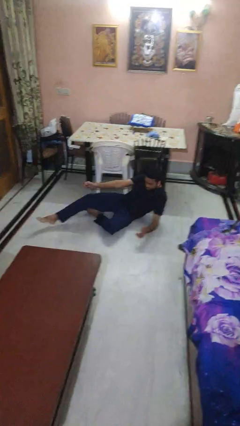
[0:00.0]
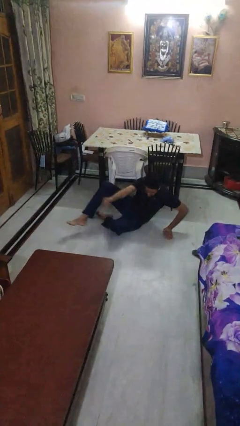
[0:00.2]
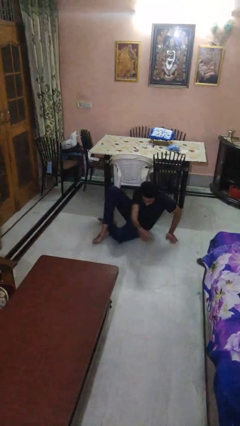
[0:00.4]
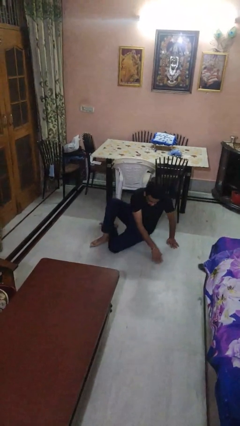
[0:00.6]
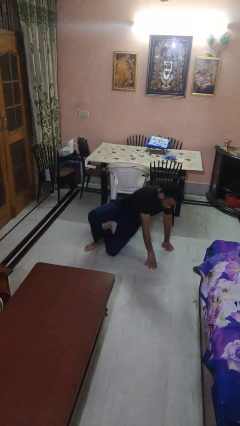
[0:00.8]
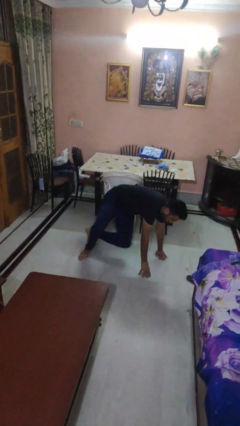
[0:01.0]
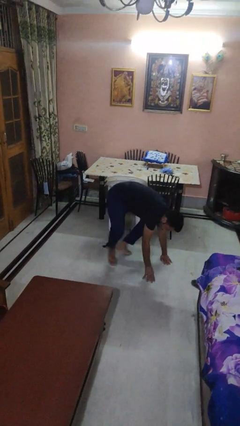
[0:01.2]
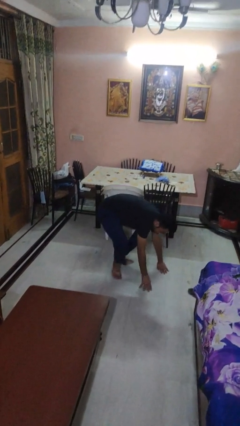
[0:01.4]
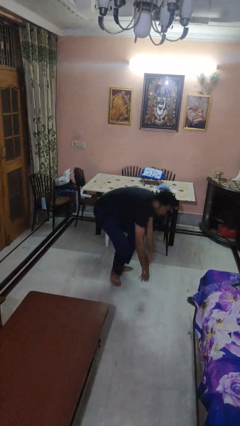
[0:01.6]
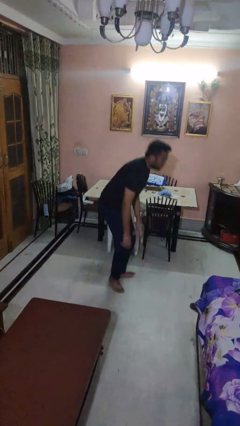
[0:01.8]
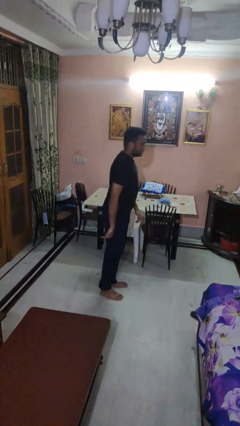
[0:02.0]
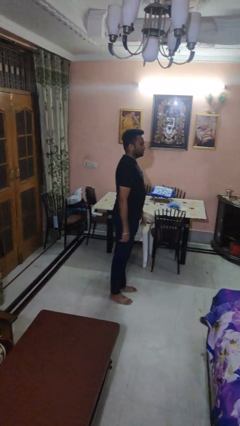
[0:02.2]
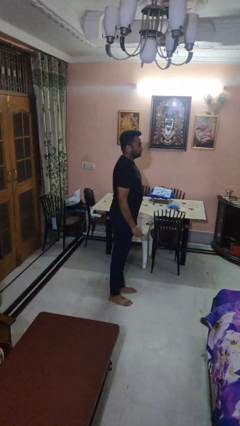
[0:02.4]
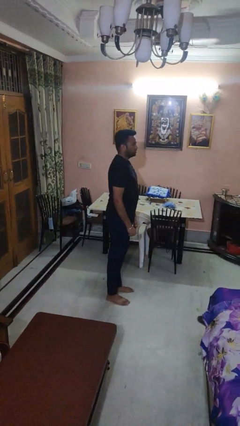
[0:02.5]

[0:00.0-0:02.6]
person stands up from floor

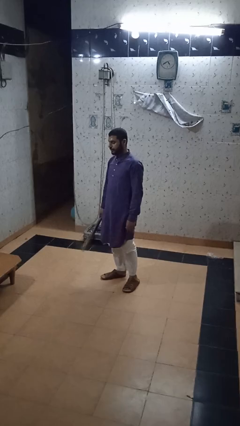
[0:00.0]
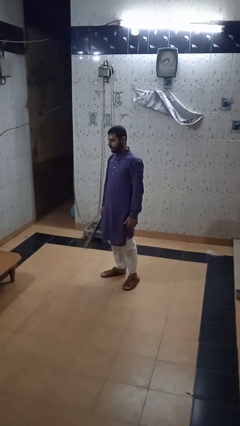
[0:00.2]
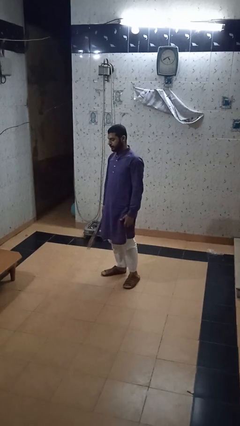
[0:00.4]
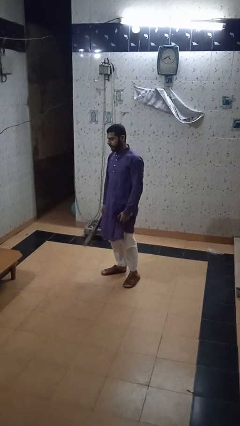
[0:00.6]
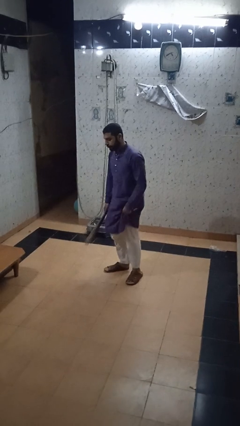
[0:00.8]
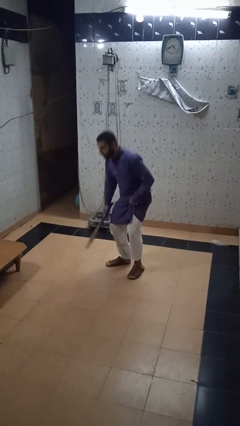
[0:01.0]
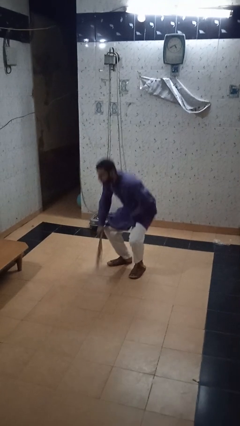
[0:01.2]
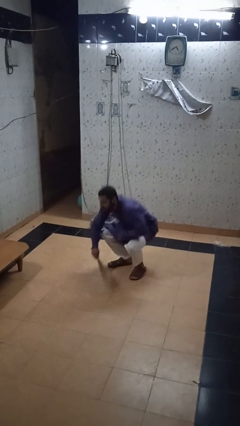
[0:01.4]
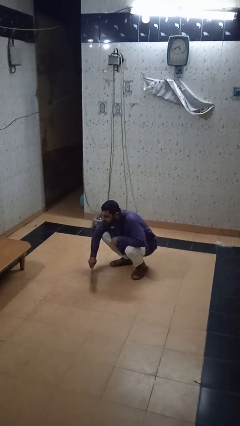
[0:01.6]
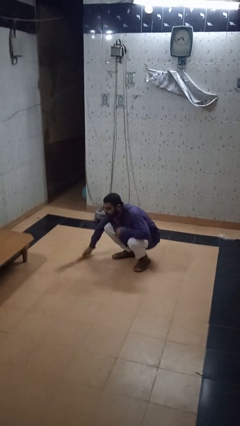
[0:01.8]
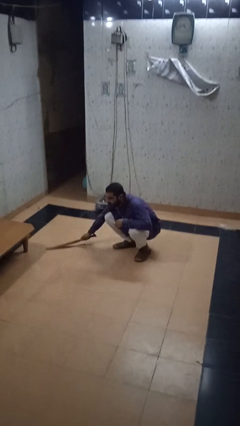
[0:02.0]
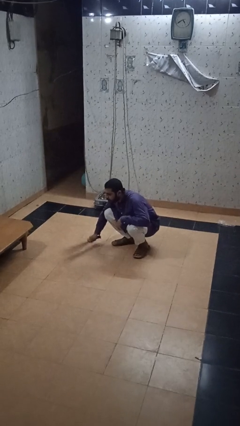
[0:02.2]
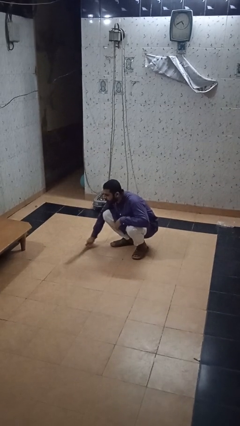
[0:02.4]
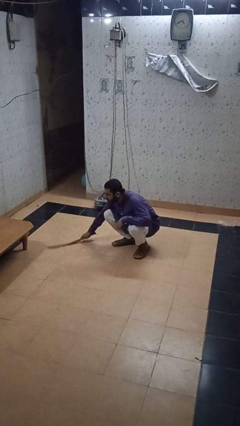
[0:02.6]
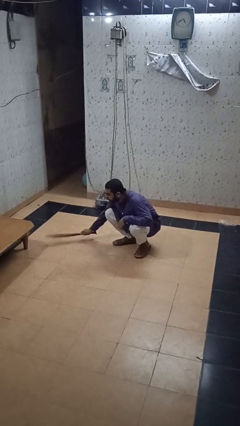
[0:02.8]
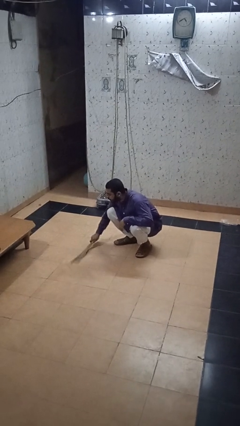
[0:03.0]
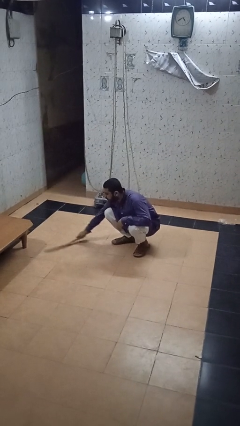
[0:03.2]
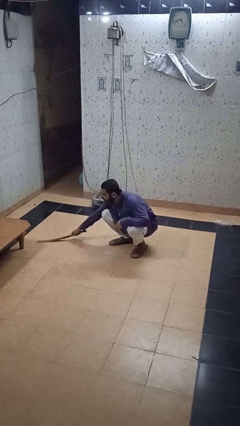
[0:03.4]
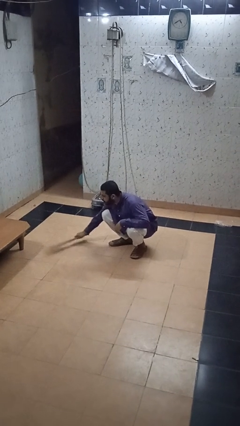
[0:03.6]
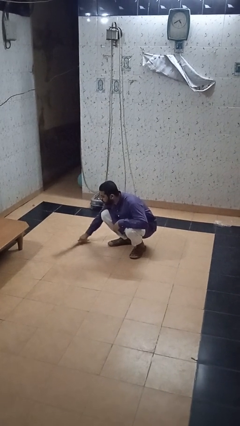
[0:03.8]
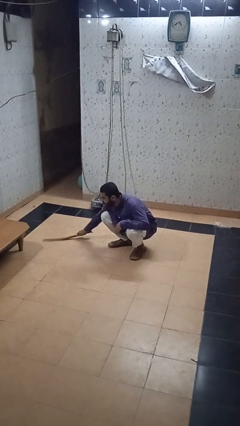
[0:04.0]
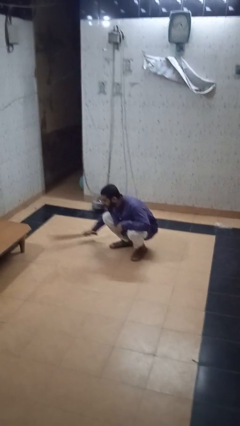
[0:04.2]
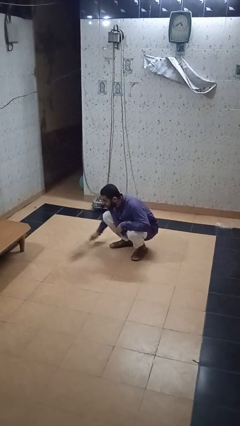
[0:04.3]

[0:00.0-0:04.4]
person sweeps floor

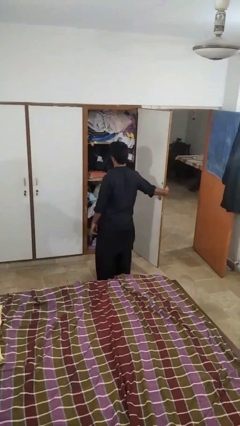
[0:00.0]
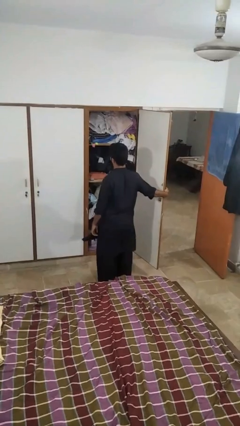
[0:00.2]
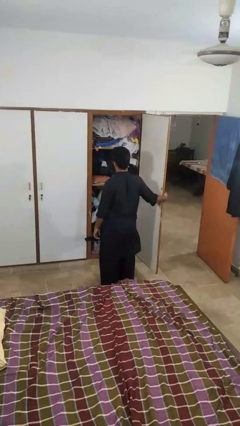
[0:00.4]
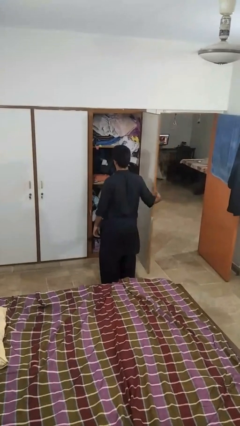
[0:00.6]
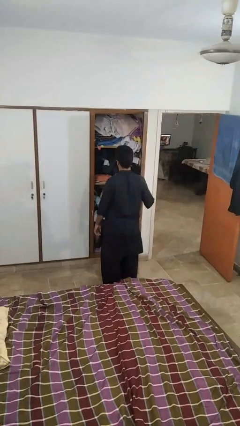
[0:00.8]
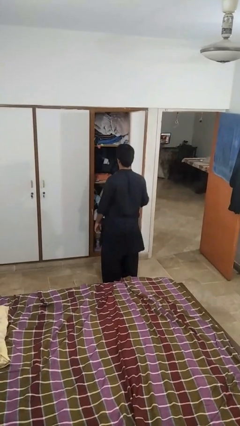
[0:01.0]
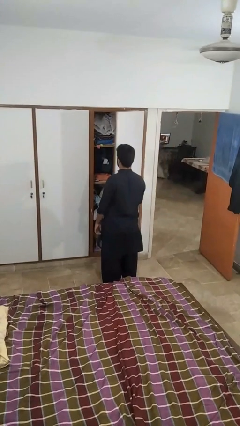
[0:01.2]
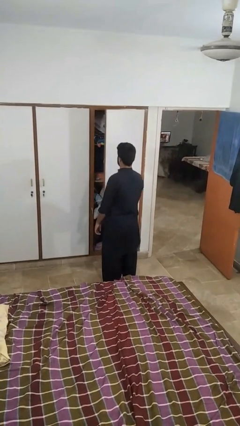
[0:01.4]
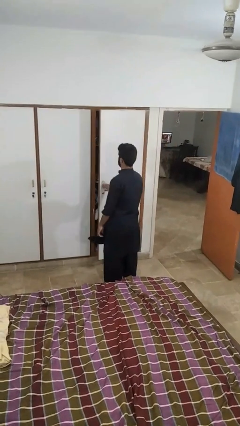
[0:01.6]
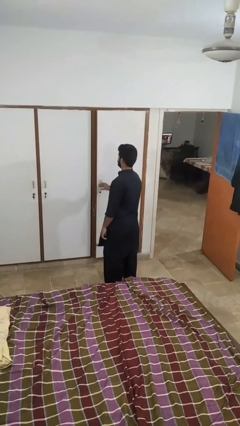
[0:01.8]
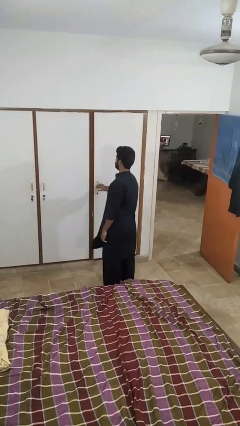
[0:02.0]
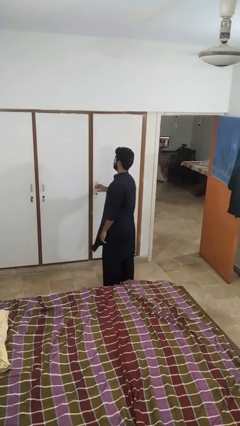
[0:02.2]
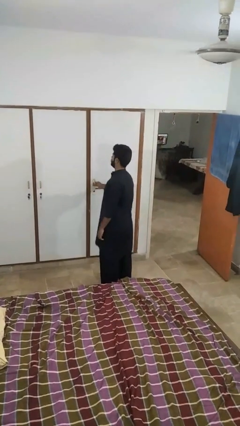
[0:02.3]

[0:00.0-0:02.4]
person closes closet door

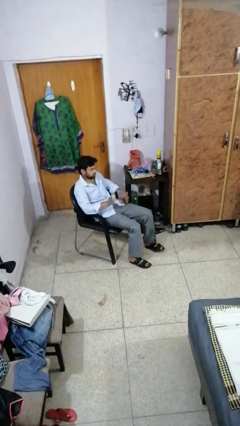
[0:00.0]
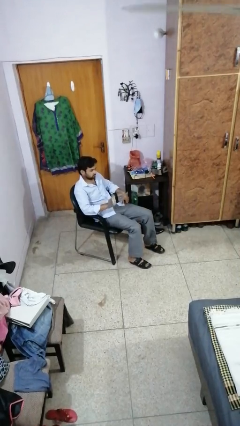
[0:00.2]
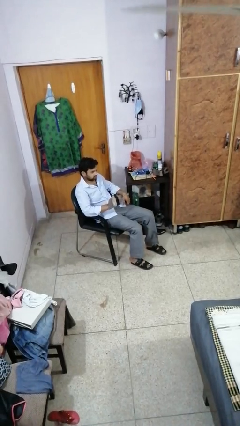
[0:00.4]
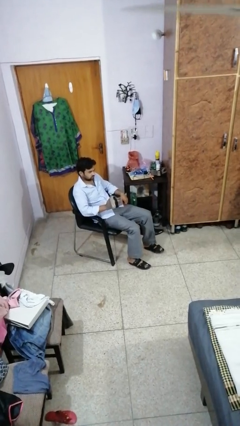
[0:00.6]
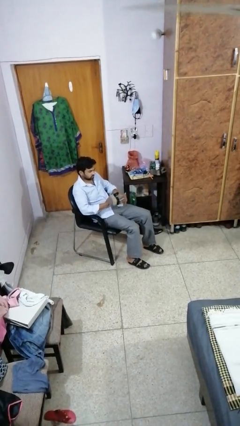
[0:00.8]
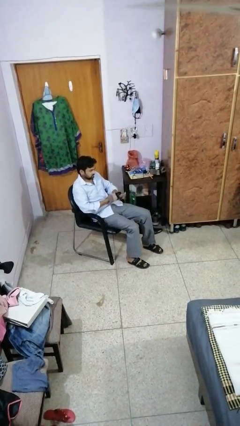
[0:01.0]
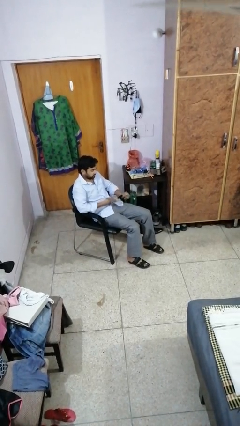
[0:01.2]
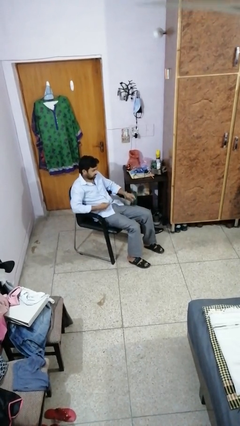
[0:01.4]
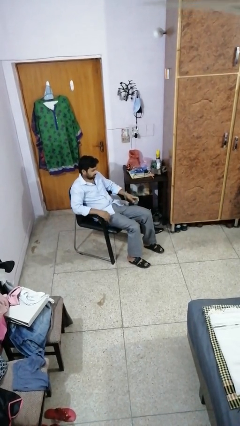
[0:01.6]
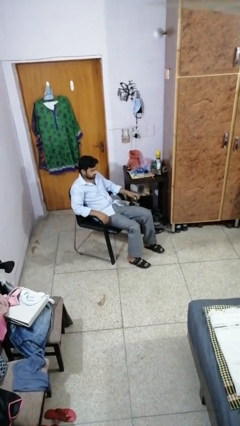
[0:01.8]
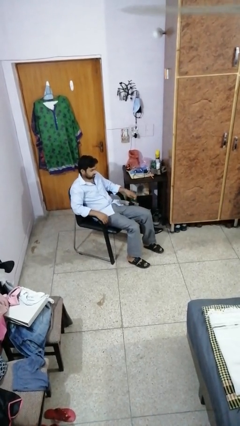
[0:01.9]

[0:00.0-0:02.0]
person takes off gloves

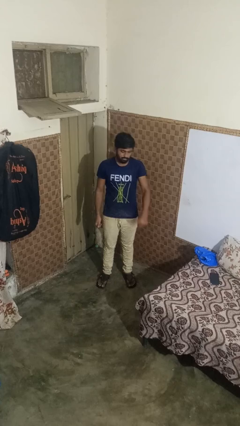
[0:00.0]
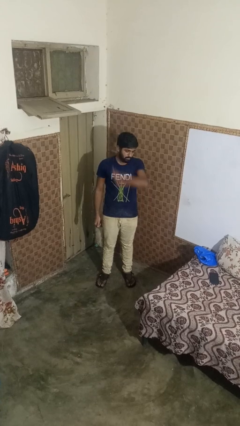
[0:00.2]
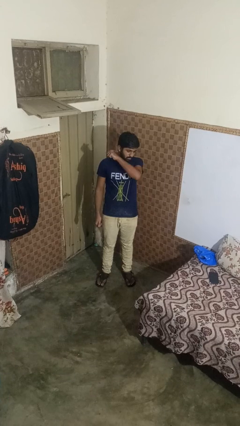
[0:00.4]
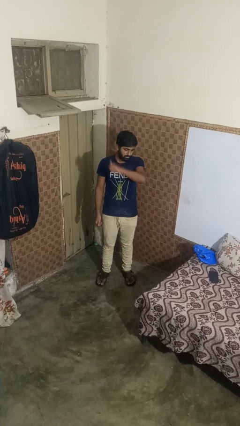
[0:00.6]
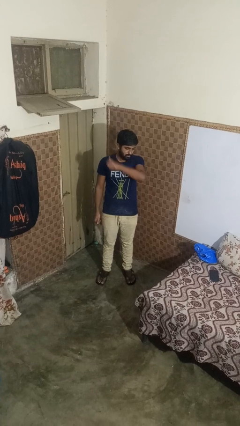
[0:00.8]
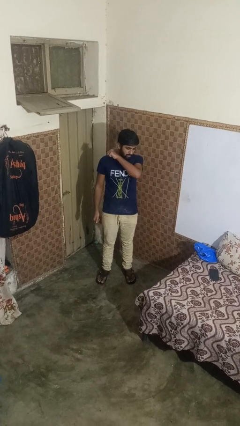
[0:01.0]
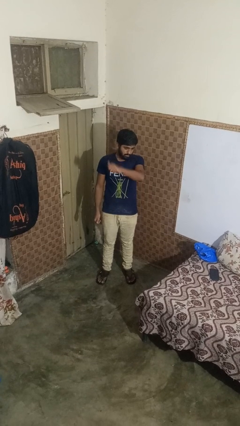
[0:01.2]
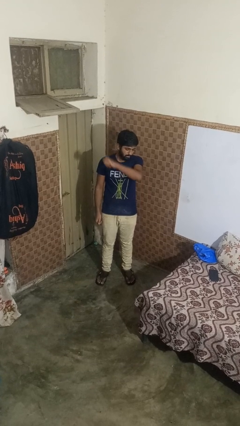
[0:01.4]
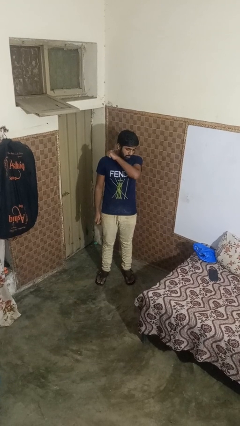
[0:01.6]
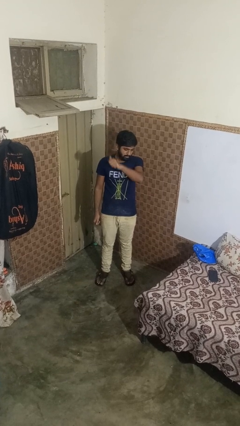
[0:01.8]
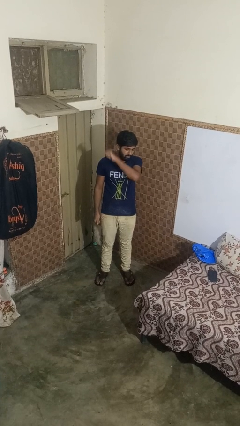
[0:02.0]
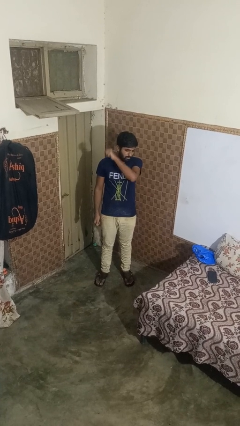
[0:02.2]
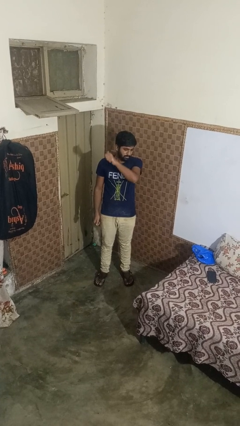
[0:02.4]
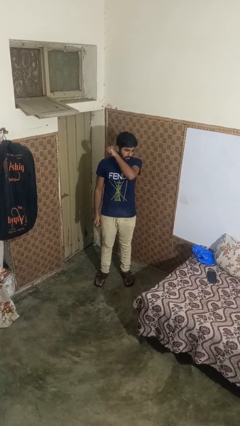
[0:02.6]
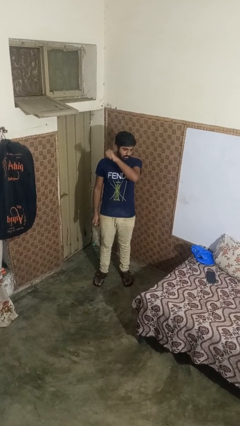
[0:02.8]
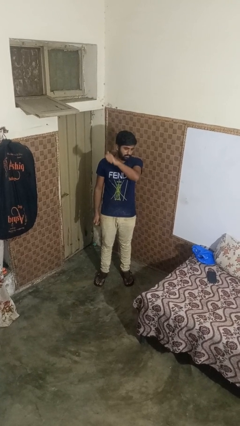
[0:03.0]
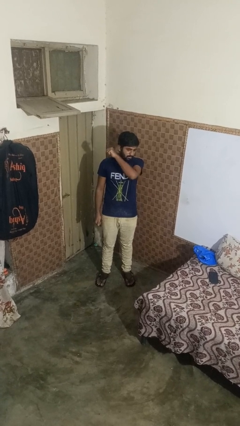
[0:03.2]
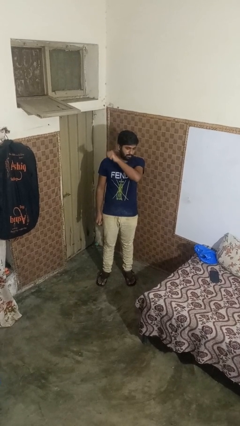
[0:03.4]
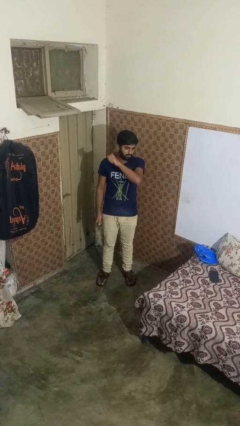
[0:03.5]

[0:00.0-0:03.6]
person gestures behind me

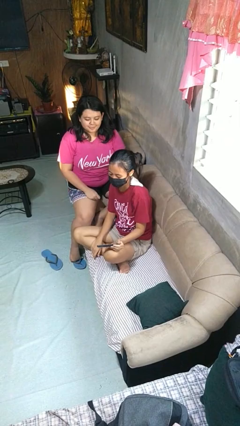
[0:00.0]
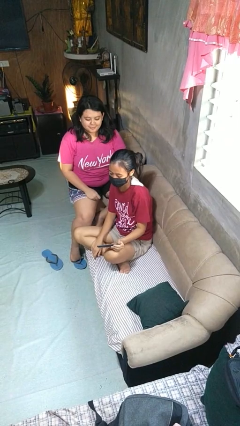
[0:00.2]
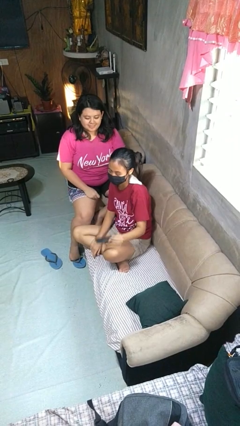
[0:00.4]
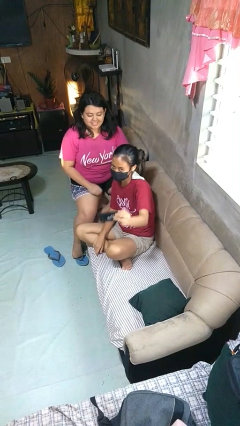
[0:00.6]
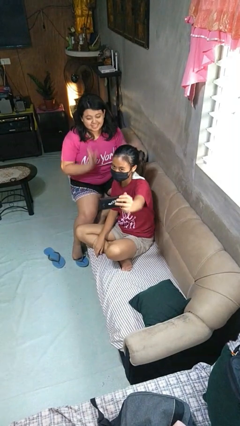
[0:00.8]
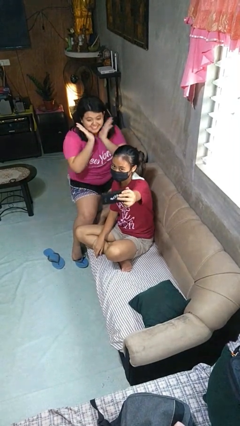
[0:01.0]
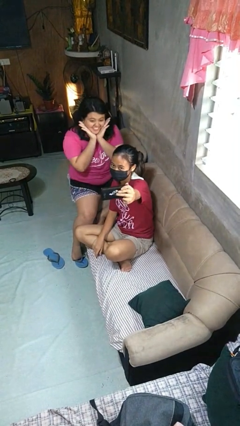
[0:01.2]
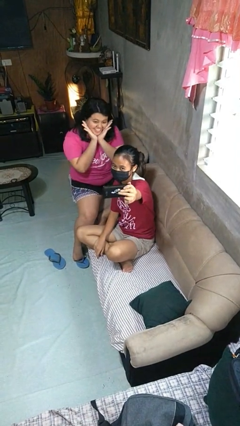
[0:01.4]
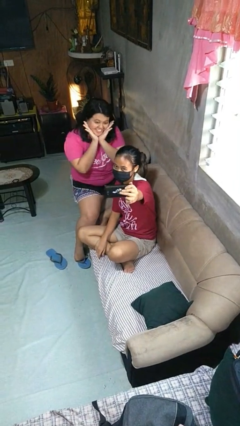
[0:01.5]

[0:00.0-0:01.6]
person takes selfie with person

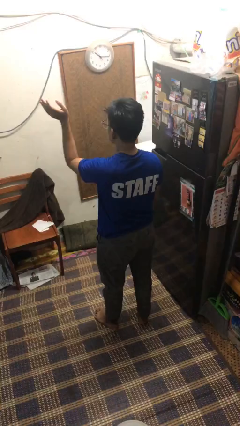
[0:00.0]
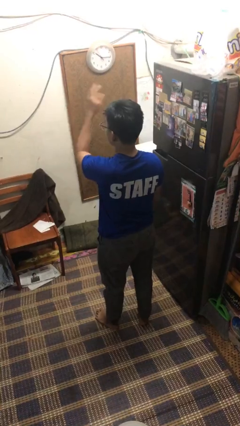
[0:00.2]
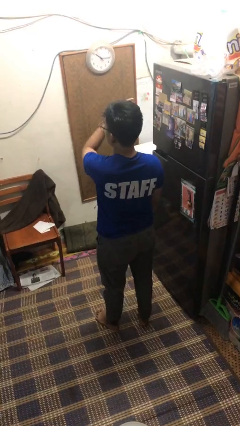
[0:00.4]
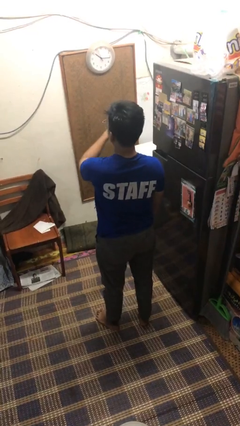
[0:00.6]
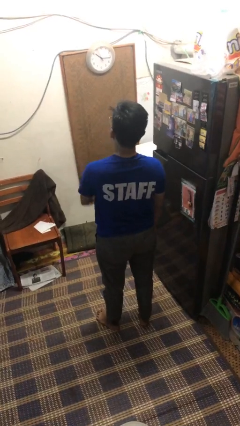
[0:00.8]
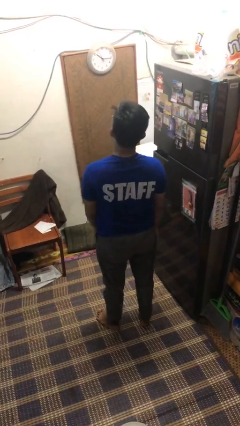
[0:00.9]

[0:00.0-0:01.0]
person gestures swipe right
